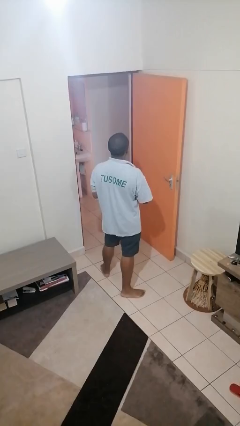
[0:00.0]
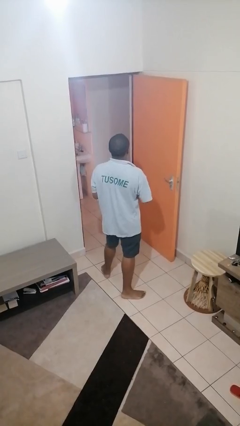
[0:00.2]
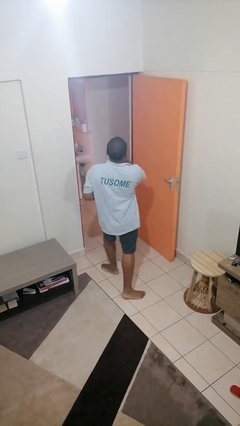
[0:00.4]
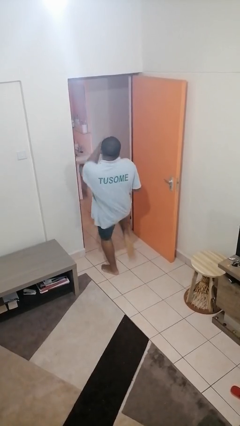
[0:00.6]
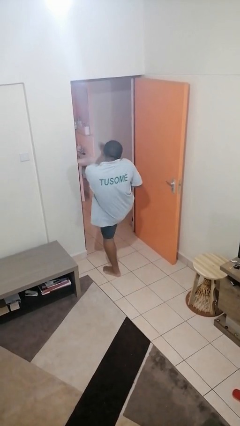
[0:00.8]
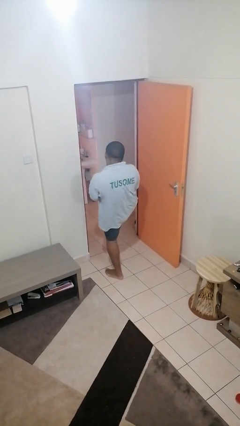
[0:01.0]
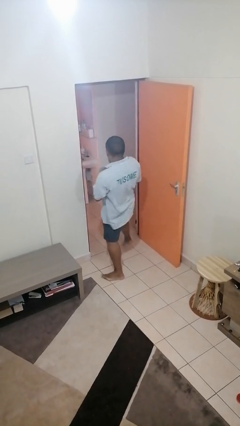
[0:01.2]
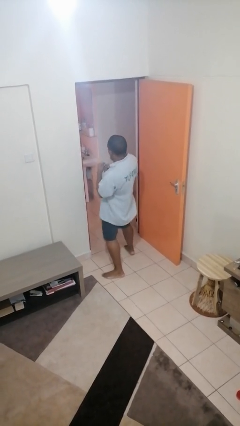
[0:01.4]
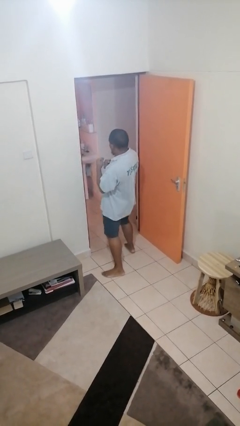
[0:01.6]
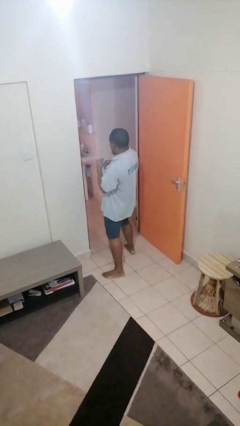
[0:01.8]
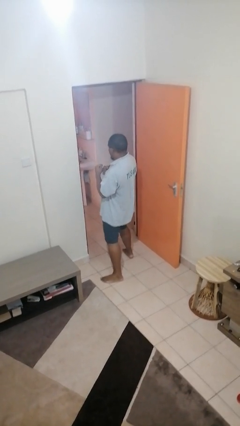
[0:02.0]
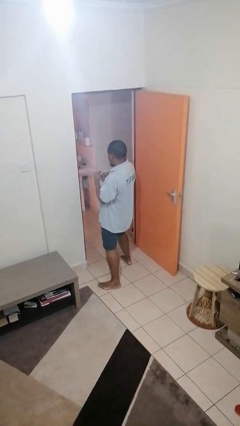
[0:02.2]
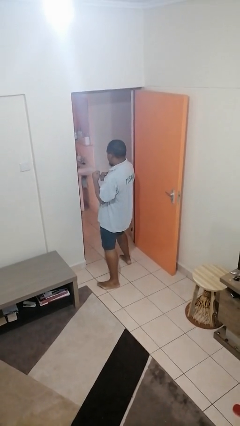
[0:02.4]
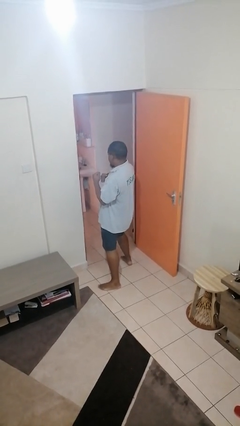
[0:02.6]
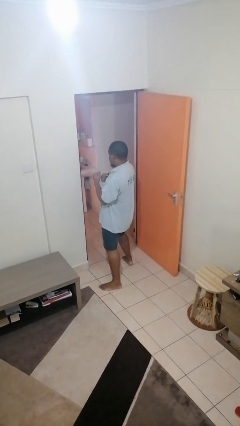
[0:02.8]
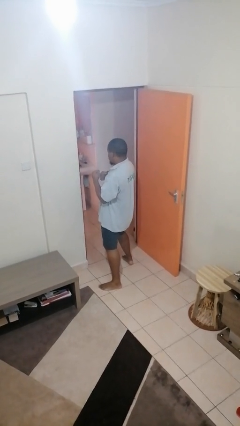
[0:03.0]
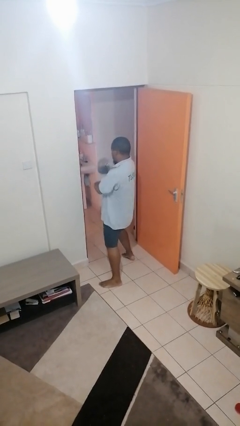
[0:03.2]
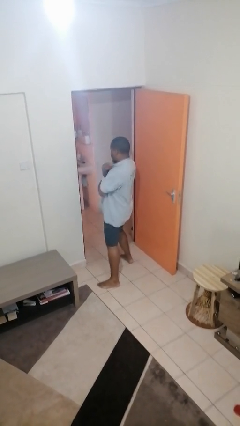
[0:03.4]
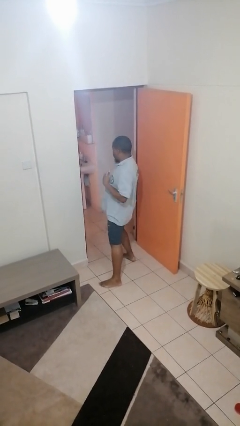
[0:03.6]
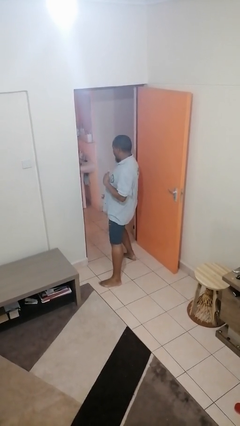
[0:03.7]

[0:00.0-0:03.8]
person karate kicks

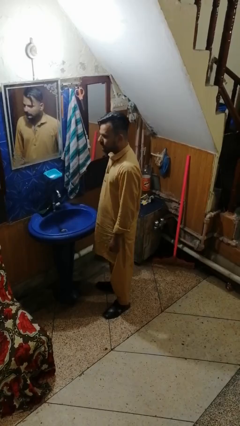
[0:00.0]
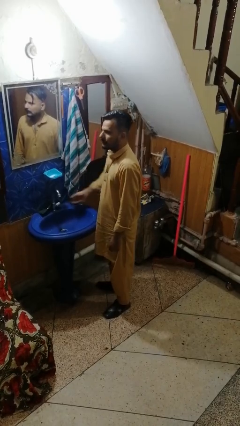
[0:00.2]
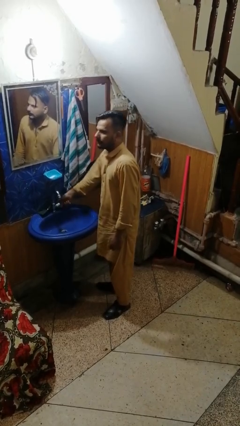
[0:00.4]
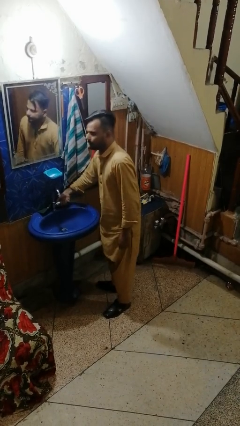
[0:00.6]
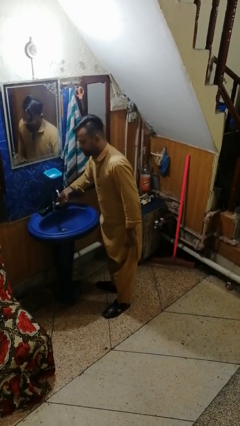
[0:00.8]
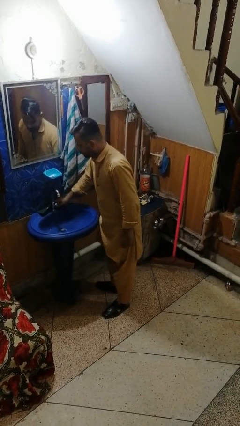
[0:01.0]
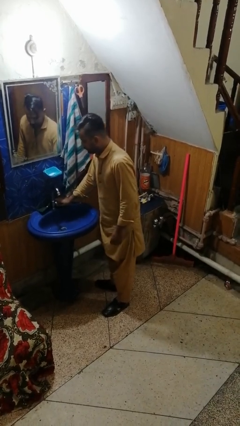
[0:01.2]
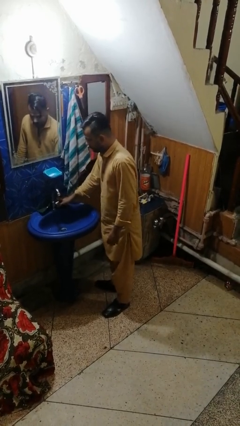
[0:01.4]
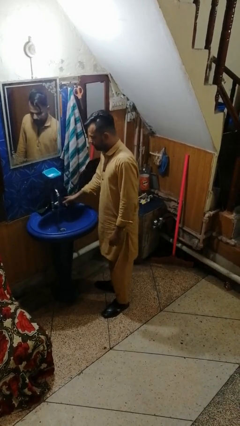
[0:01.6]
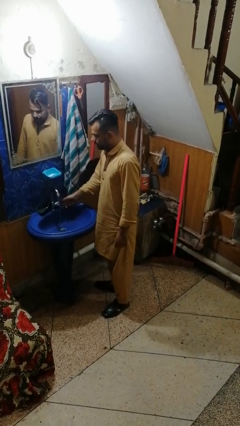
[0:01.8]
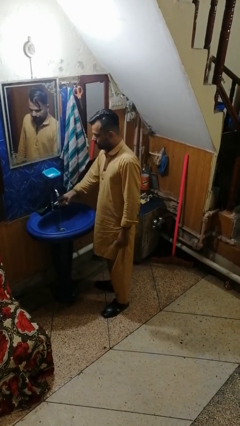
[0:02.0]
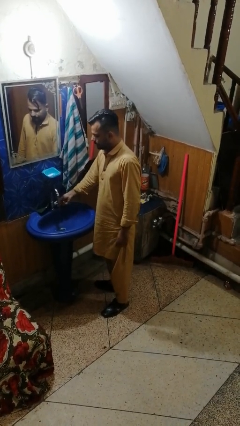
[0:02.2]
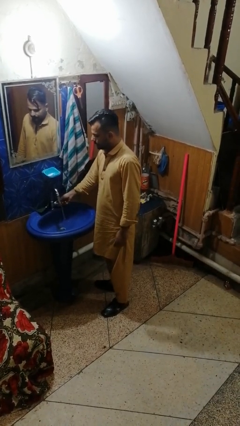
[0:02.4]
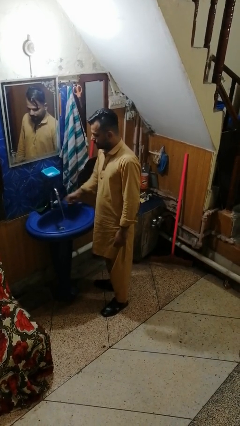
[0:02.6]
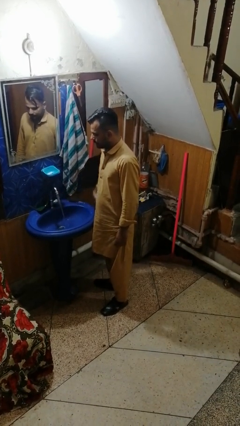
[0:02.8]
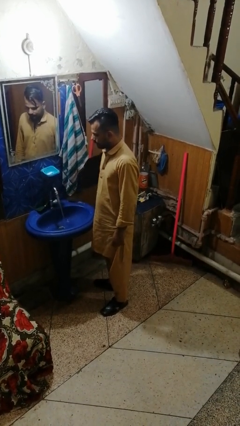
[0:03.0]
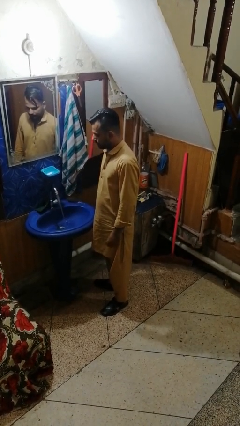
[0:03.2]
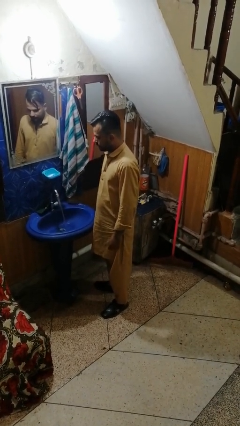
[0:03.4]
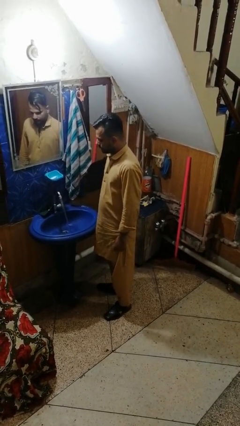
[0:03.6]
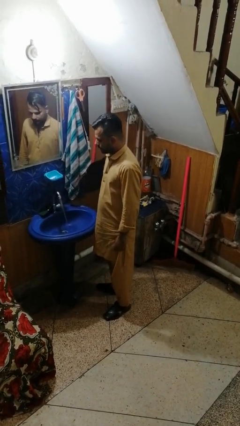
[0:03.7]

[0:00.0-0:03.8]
person turns on faucet

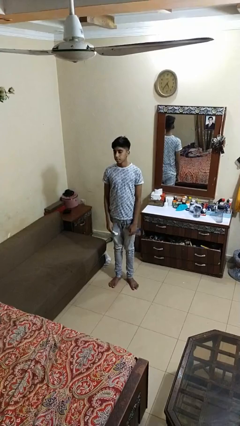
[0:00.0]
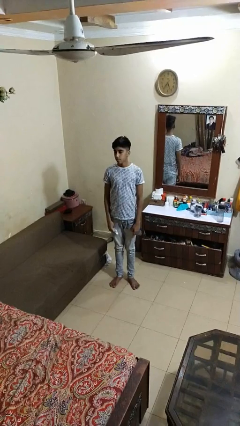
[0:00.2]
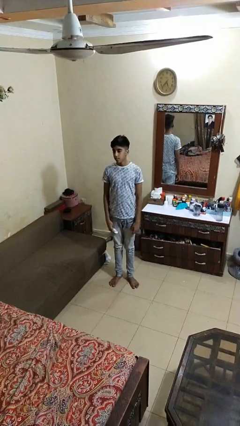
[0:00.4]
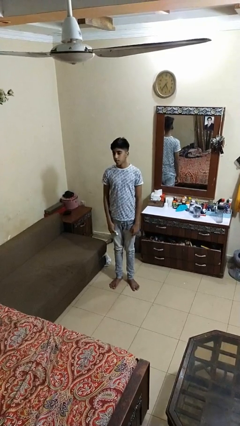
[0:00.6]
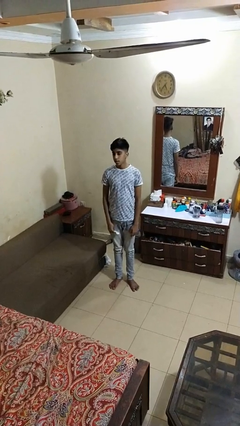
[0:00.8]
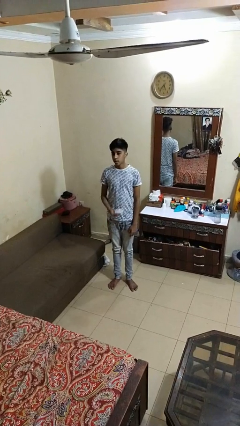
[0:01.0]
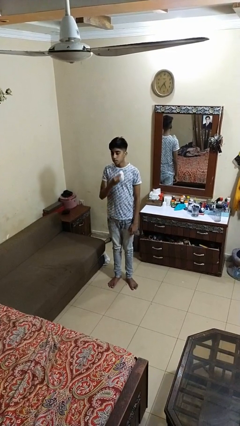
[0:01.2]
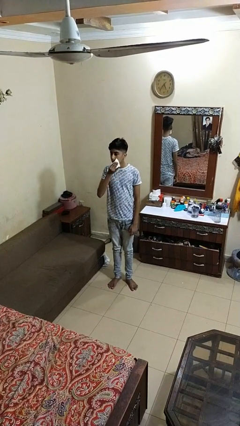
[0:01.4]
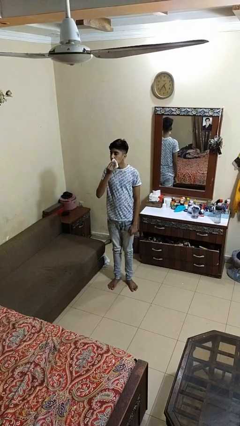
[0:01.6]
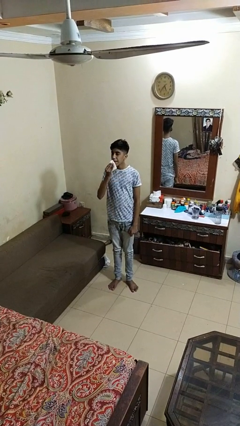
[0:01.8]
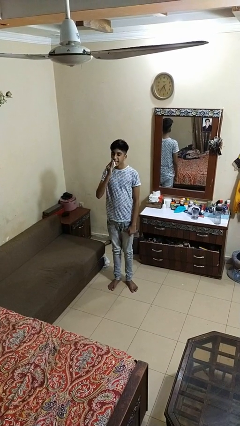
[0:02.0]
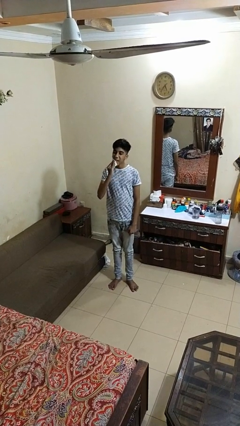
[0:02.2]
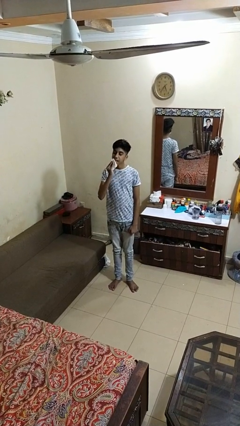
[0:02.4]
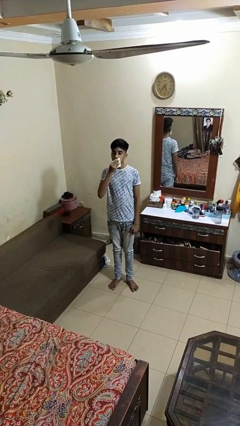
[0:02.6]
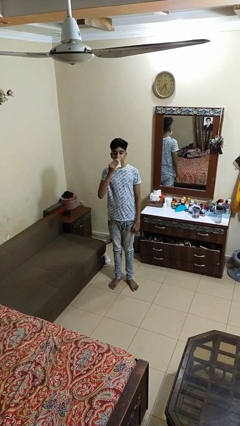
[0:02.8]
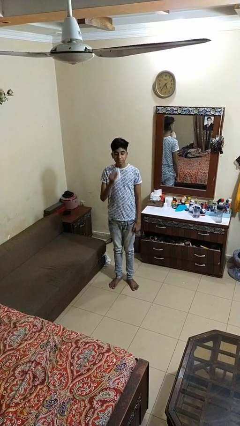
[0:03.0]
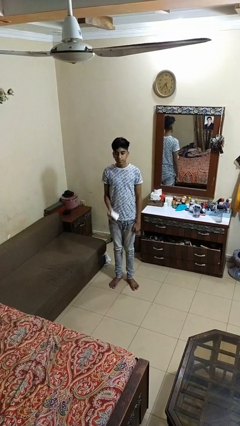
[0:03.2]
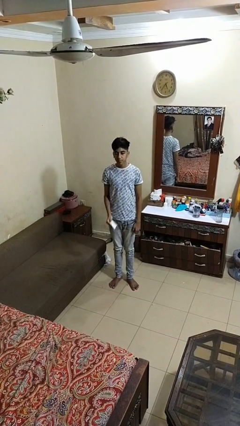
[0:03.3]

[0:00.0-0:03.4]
person wipes mouth with napkin

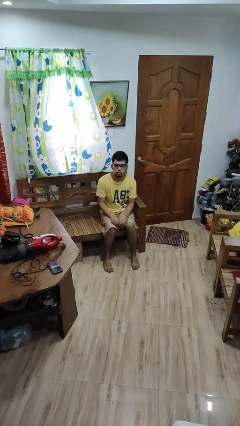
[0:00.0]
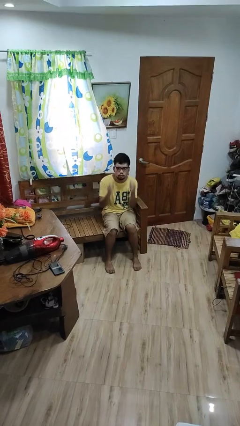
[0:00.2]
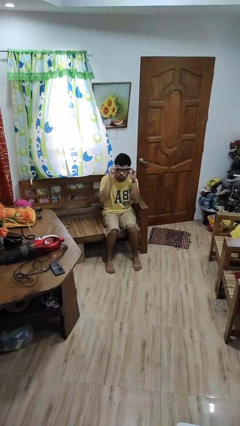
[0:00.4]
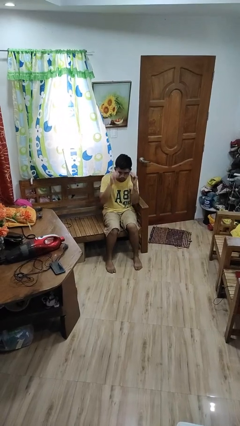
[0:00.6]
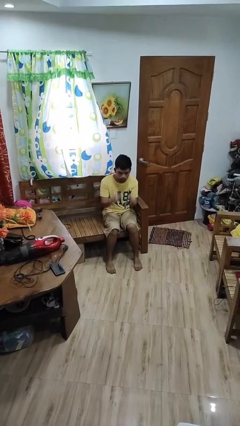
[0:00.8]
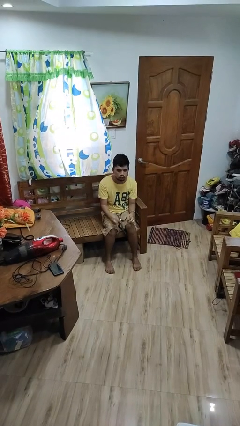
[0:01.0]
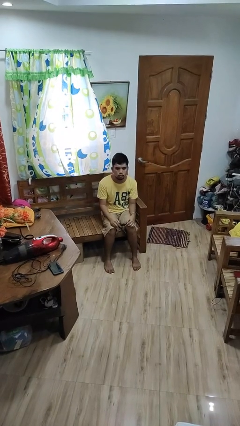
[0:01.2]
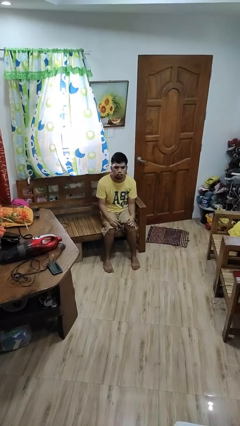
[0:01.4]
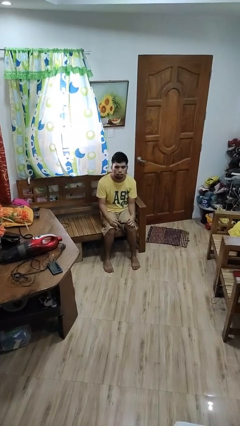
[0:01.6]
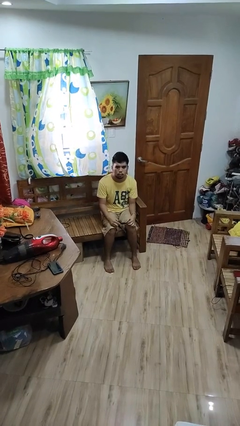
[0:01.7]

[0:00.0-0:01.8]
person takes off glasses

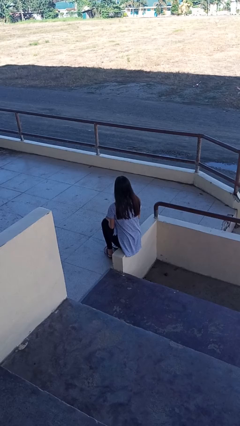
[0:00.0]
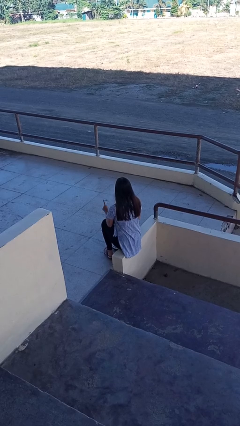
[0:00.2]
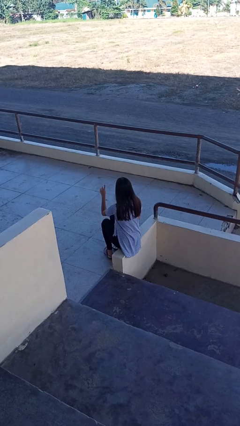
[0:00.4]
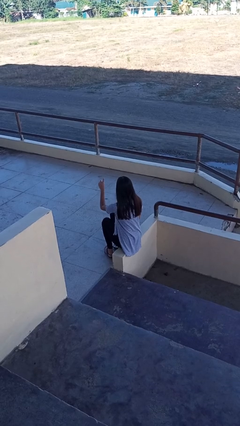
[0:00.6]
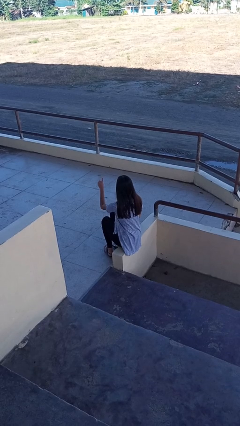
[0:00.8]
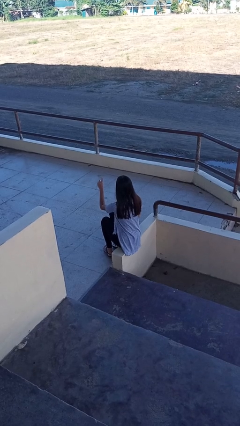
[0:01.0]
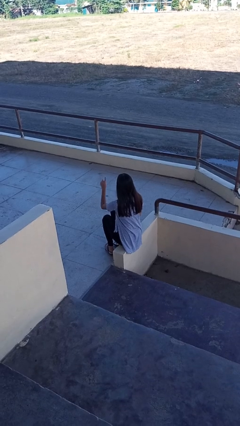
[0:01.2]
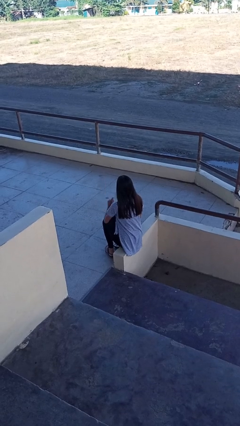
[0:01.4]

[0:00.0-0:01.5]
person gestures number one

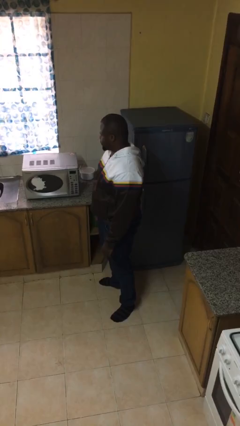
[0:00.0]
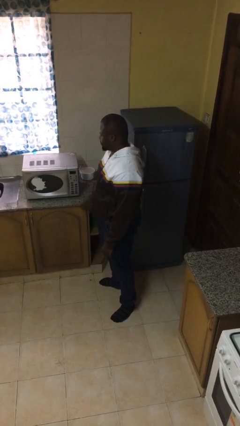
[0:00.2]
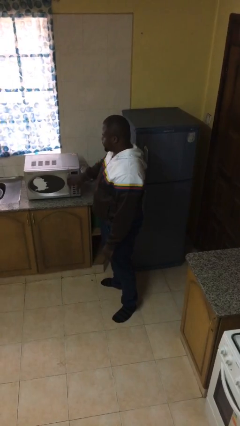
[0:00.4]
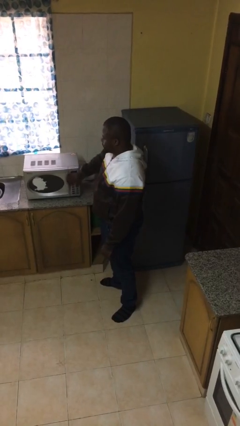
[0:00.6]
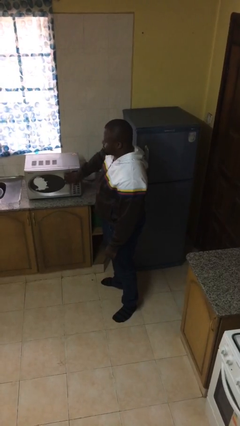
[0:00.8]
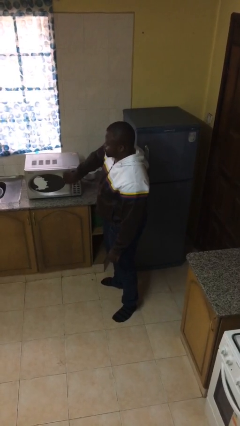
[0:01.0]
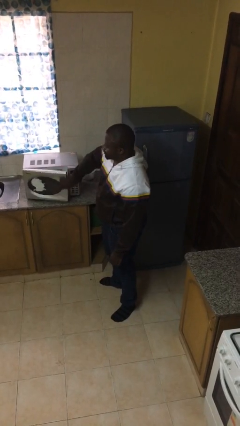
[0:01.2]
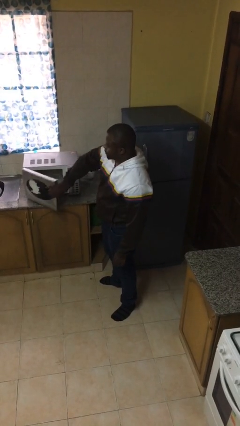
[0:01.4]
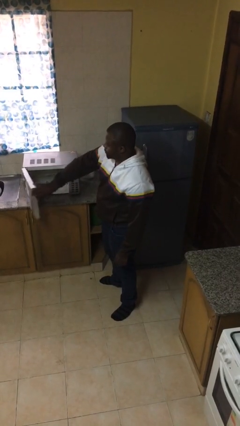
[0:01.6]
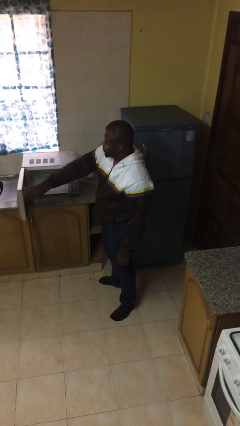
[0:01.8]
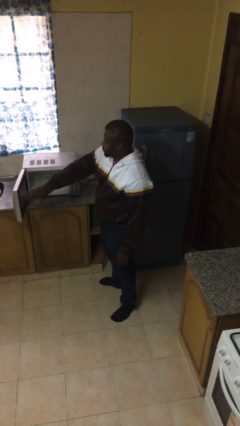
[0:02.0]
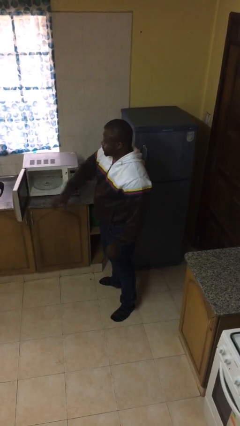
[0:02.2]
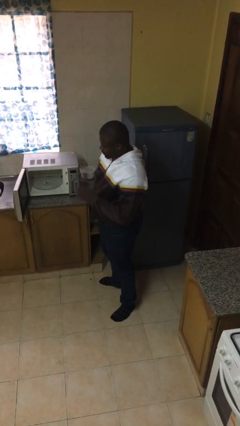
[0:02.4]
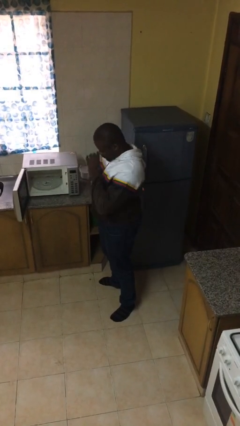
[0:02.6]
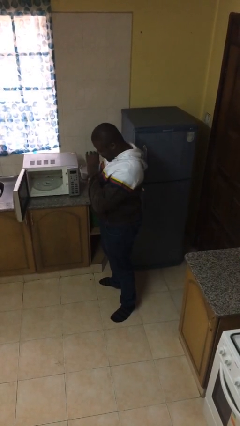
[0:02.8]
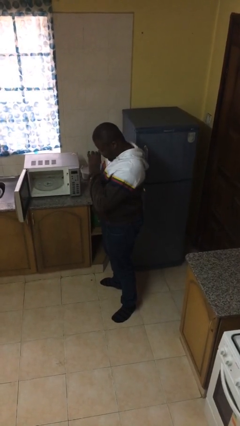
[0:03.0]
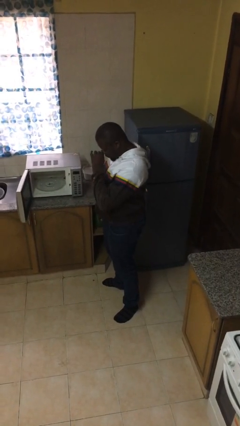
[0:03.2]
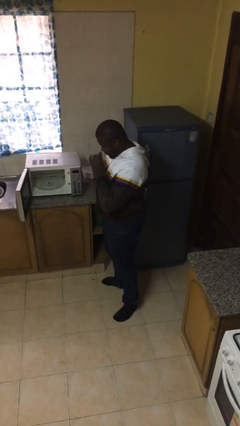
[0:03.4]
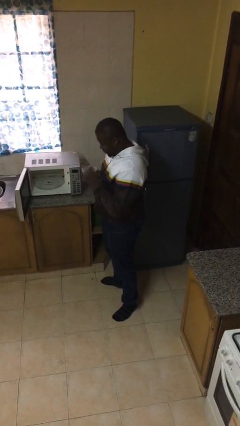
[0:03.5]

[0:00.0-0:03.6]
person opens microwave
